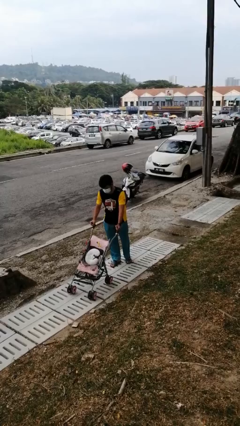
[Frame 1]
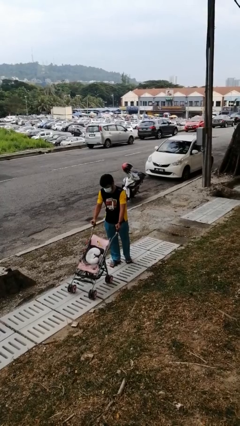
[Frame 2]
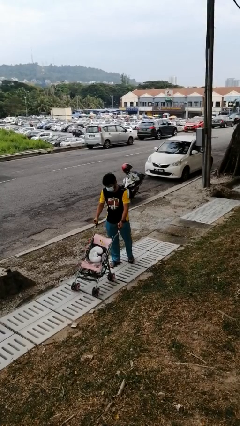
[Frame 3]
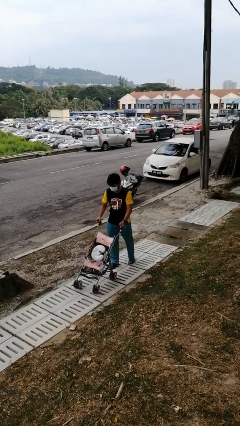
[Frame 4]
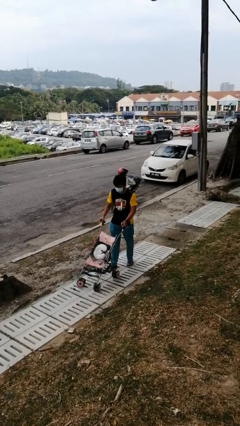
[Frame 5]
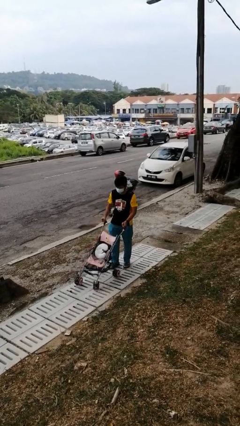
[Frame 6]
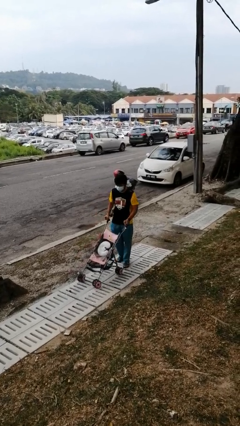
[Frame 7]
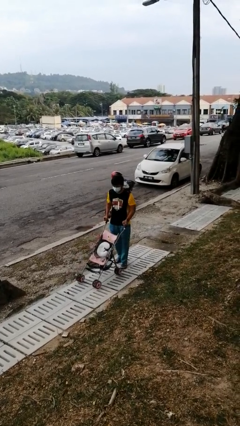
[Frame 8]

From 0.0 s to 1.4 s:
person pulls wheeled cart

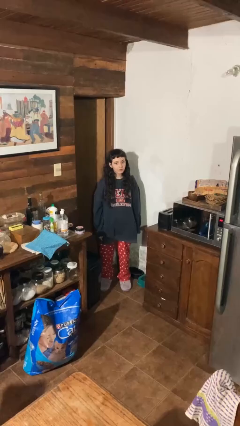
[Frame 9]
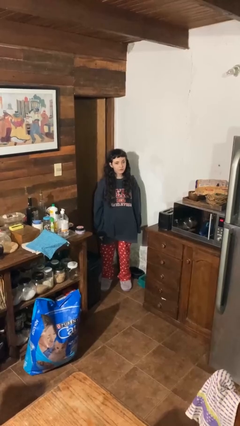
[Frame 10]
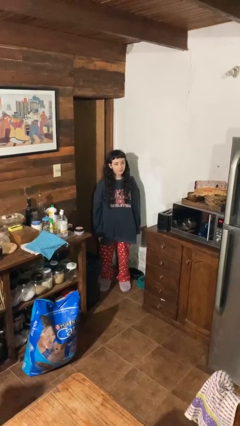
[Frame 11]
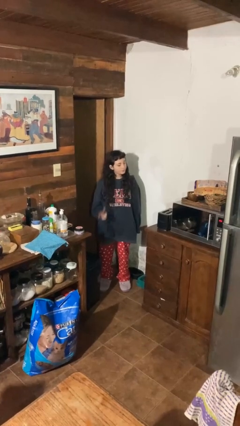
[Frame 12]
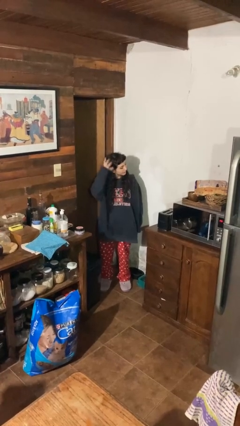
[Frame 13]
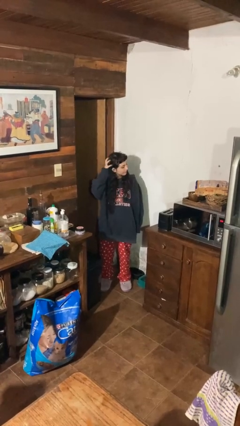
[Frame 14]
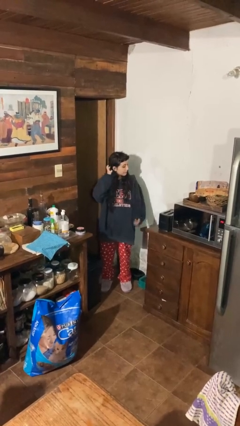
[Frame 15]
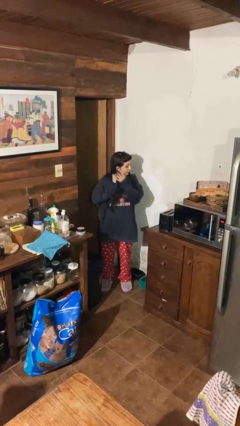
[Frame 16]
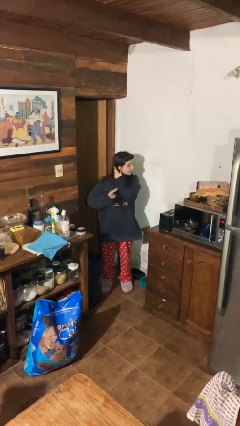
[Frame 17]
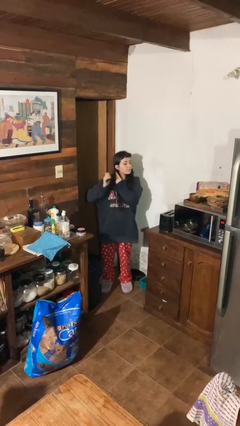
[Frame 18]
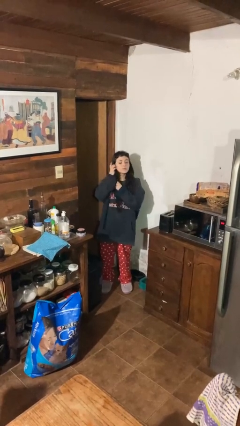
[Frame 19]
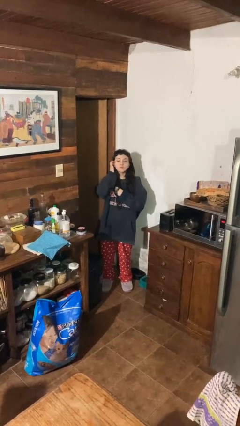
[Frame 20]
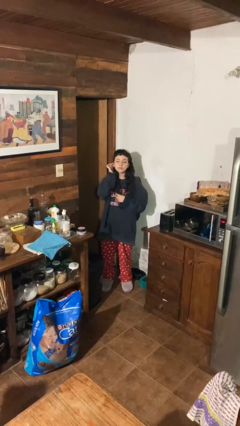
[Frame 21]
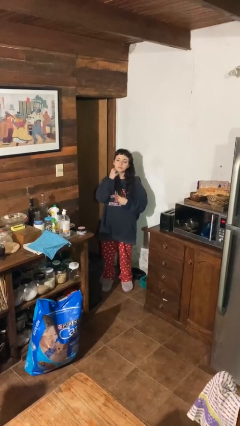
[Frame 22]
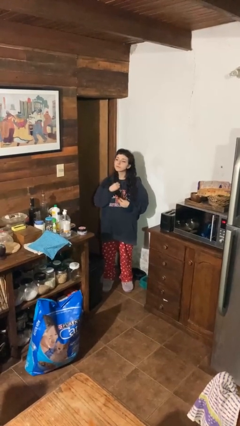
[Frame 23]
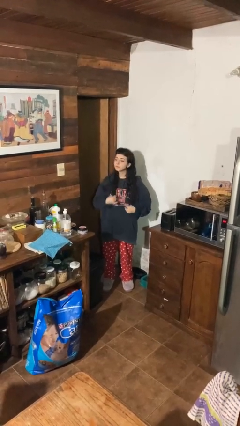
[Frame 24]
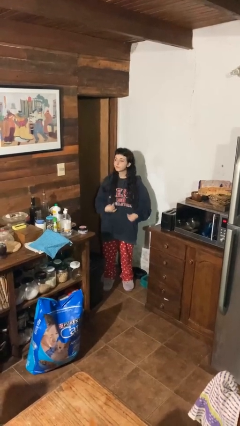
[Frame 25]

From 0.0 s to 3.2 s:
person strokes hair

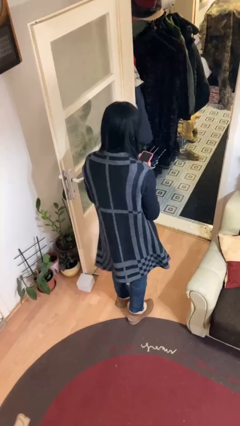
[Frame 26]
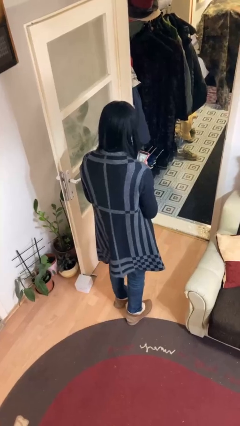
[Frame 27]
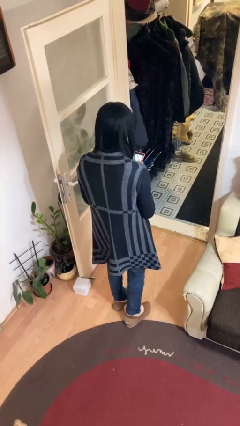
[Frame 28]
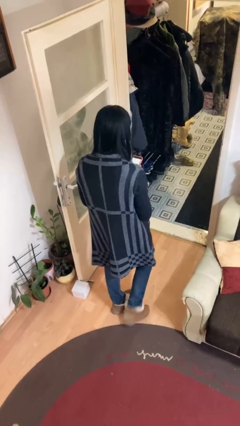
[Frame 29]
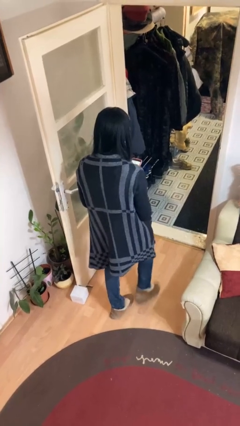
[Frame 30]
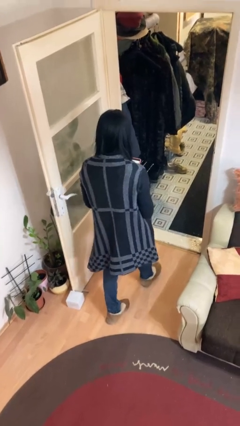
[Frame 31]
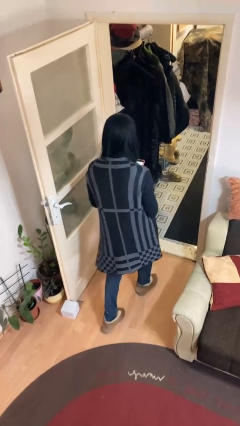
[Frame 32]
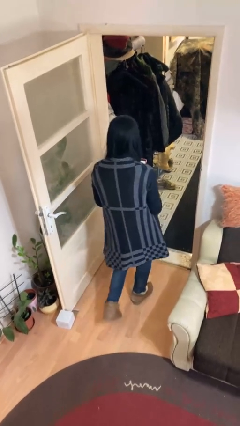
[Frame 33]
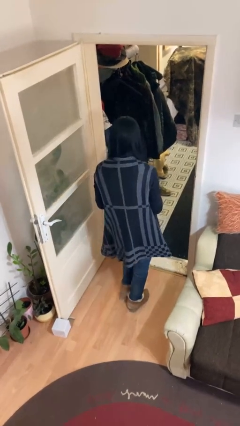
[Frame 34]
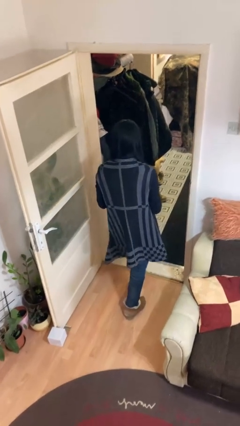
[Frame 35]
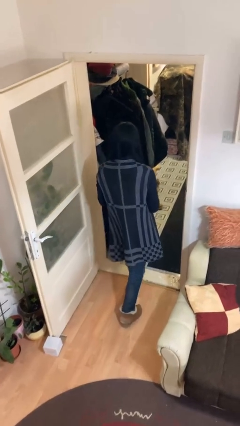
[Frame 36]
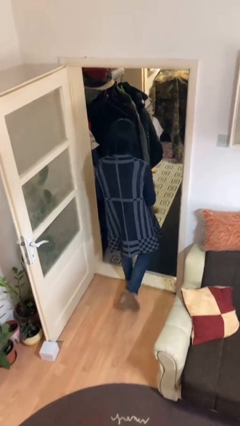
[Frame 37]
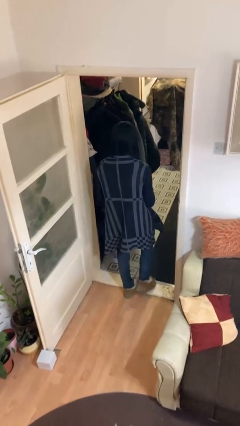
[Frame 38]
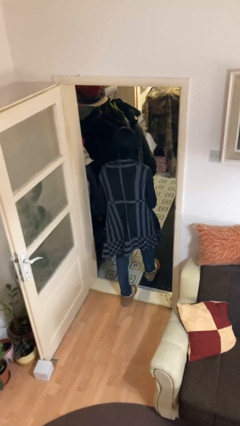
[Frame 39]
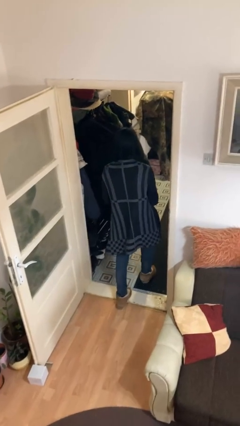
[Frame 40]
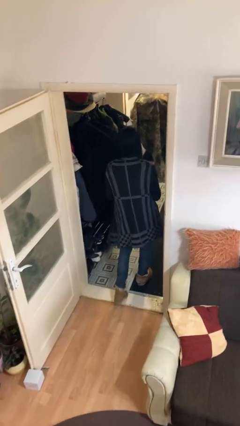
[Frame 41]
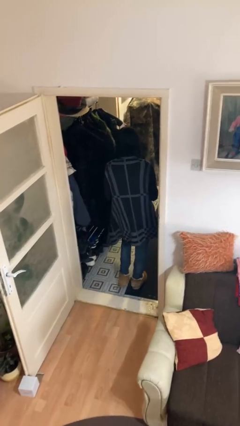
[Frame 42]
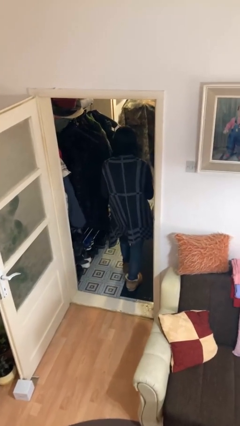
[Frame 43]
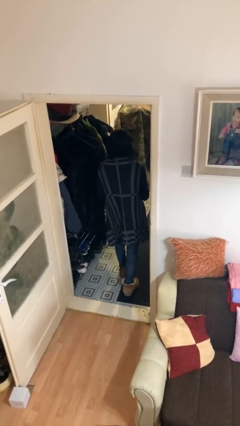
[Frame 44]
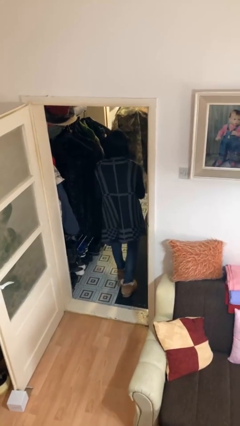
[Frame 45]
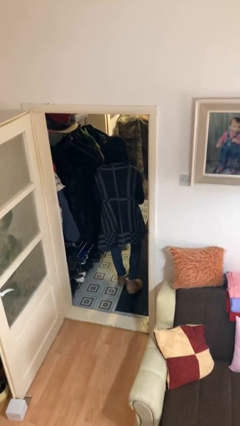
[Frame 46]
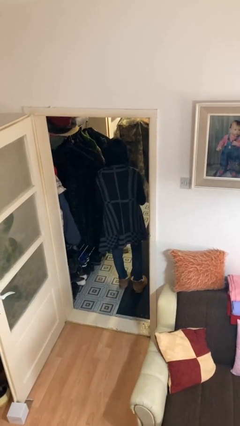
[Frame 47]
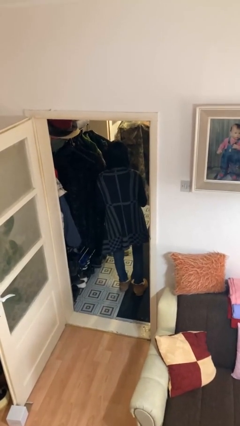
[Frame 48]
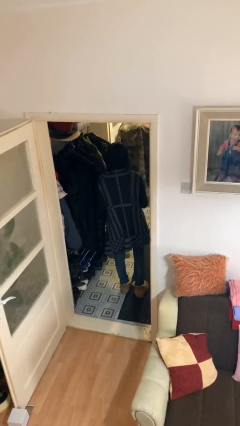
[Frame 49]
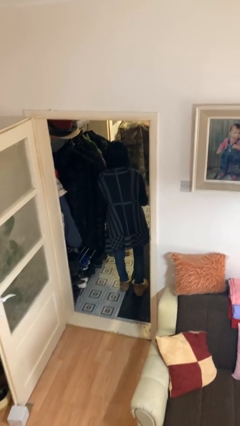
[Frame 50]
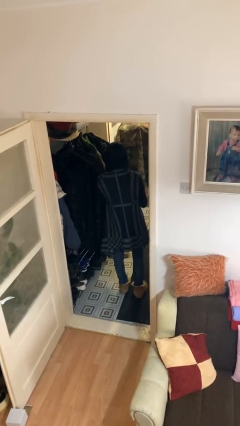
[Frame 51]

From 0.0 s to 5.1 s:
person exits scene through structure

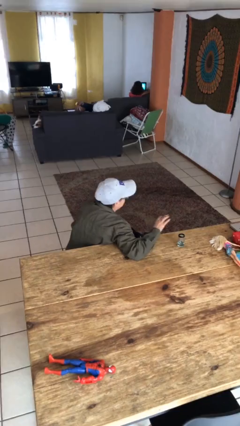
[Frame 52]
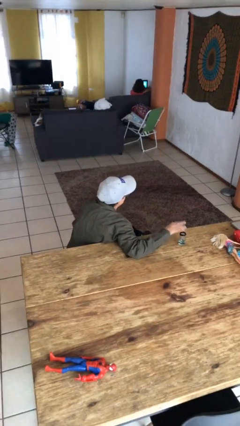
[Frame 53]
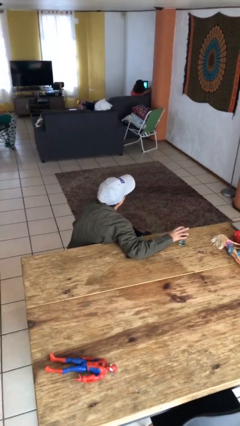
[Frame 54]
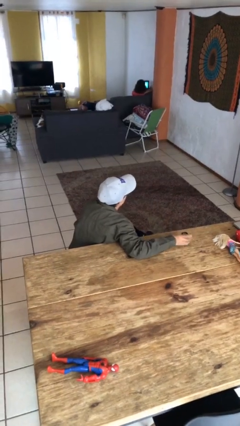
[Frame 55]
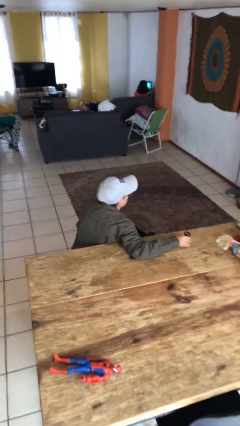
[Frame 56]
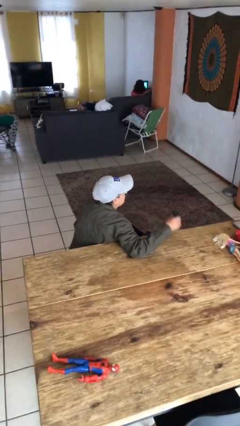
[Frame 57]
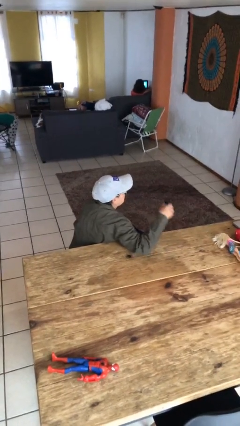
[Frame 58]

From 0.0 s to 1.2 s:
person picks up object from table

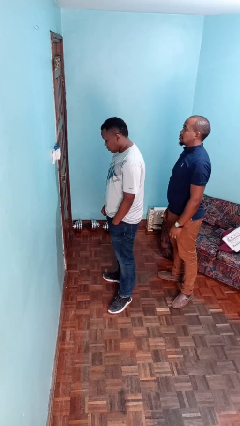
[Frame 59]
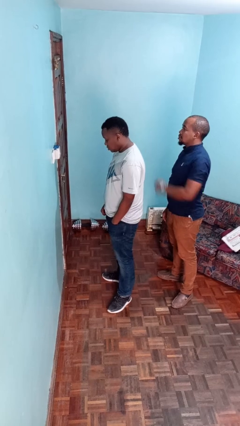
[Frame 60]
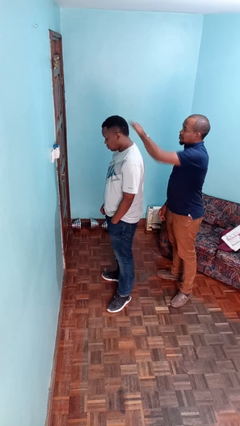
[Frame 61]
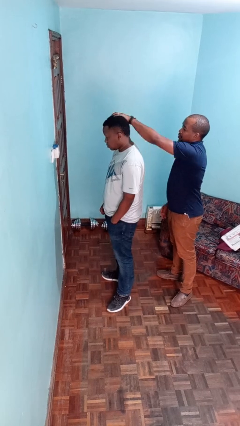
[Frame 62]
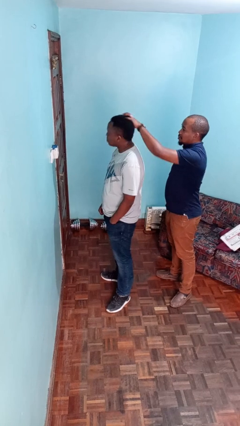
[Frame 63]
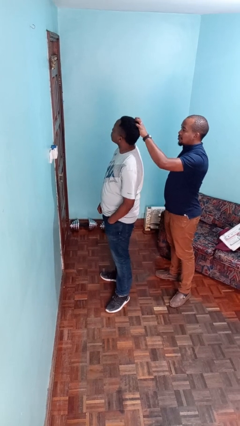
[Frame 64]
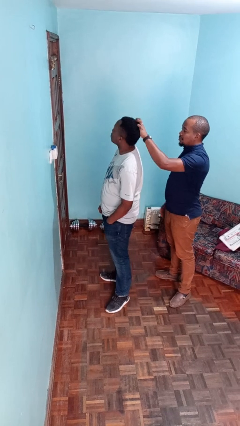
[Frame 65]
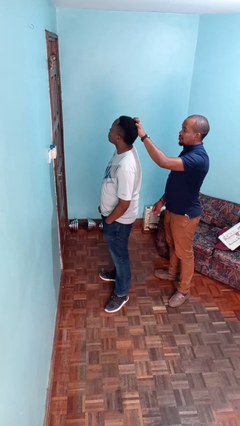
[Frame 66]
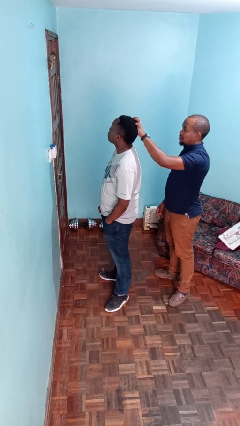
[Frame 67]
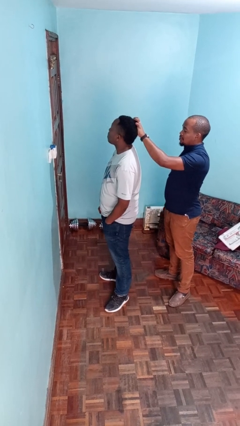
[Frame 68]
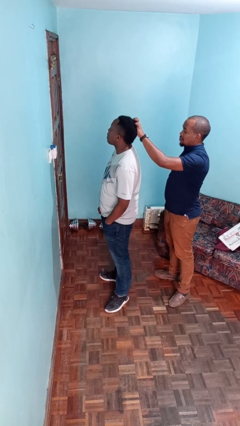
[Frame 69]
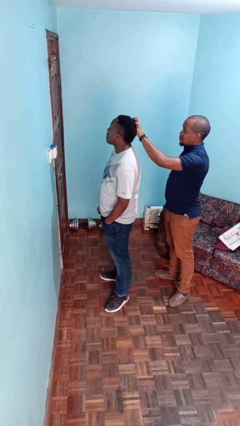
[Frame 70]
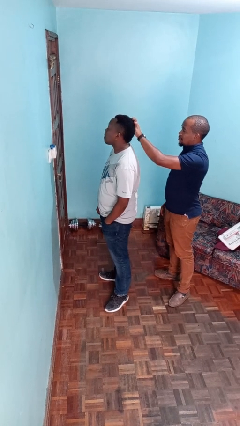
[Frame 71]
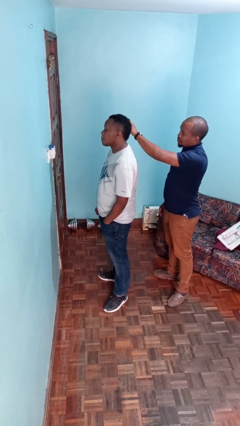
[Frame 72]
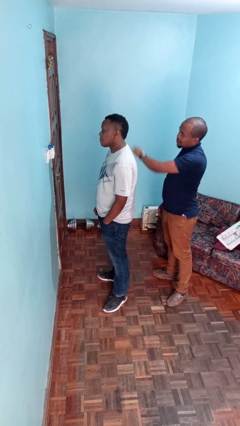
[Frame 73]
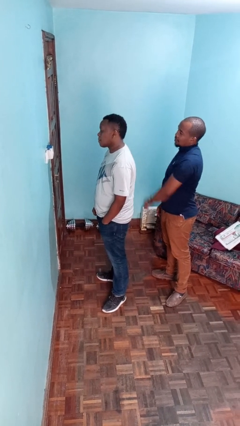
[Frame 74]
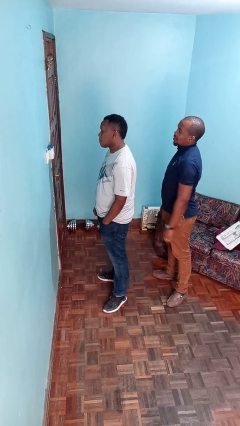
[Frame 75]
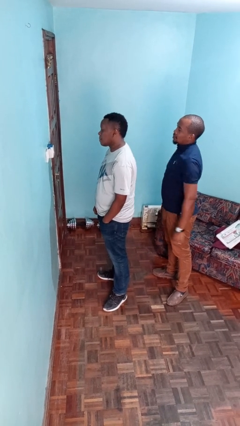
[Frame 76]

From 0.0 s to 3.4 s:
person grabs person by hair

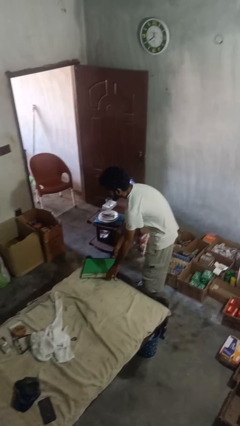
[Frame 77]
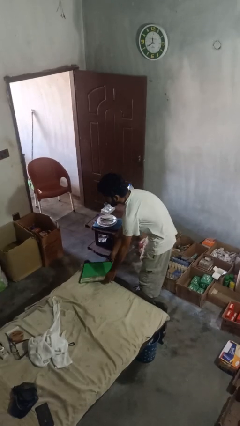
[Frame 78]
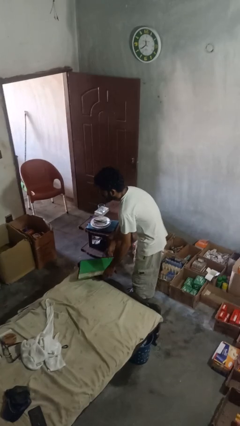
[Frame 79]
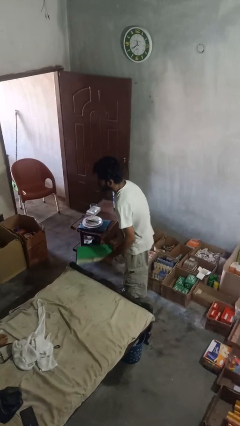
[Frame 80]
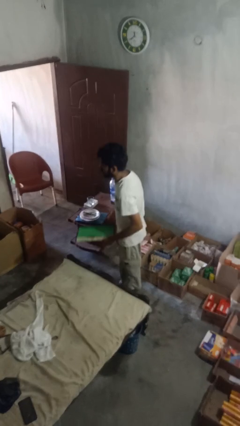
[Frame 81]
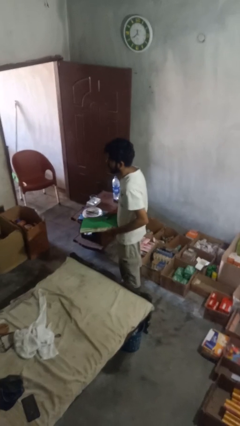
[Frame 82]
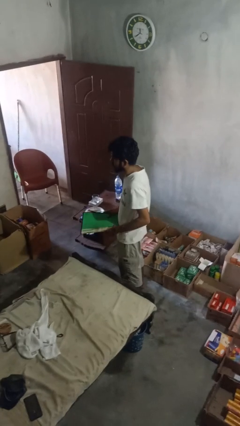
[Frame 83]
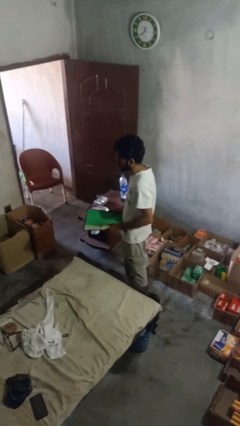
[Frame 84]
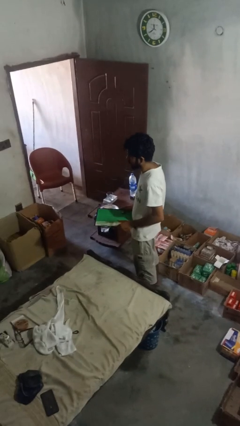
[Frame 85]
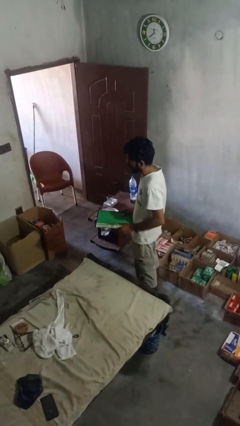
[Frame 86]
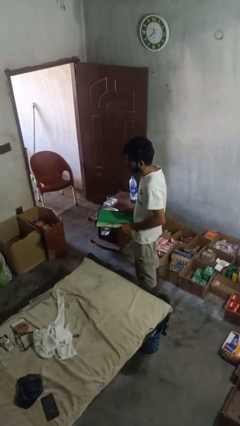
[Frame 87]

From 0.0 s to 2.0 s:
person puts down object on bed

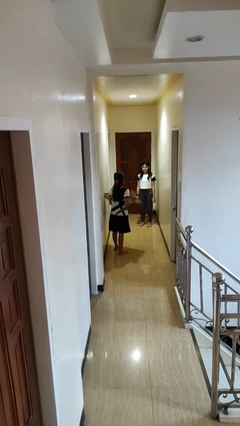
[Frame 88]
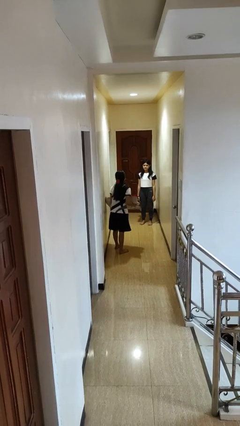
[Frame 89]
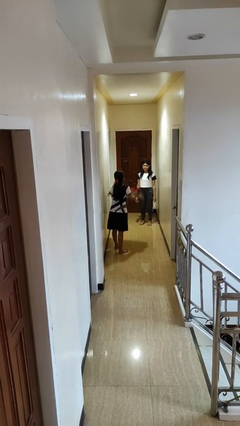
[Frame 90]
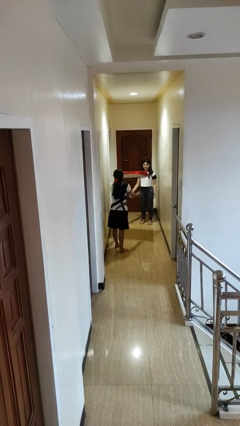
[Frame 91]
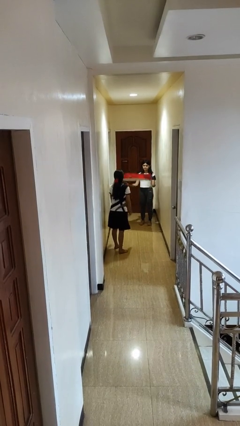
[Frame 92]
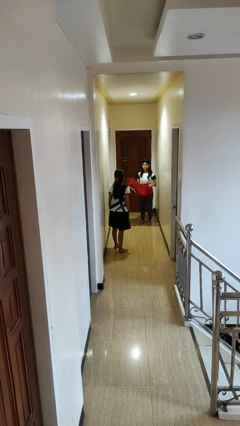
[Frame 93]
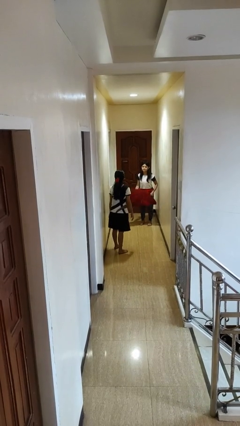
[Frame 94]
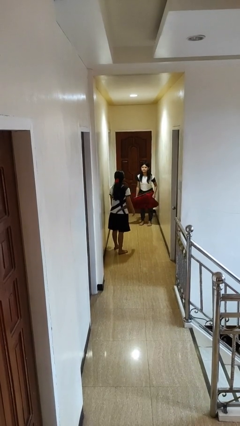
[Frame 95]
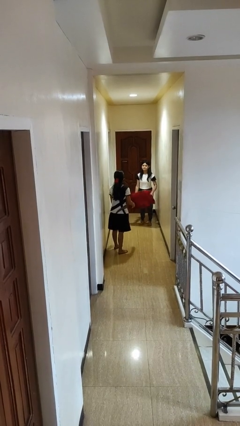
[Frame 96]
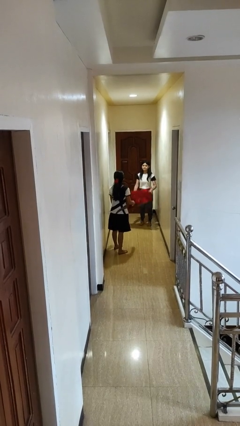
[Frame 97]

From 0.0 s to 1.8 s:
person throws object to person
